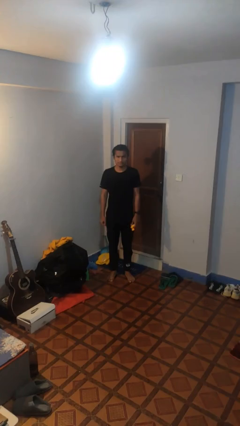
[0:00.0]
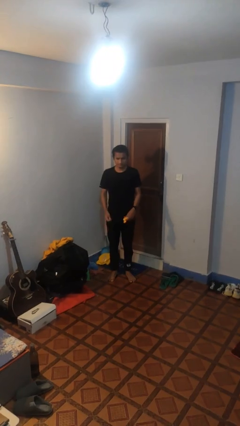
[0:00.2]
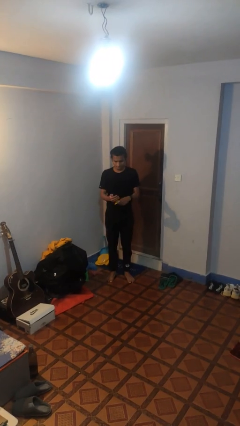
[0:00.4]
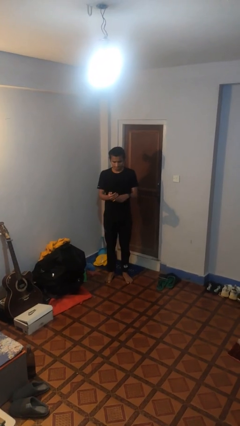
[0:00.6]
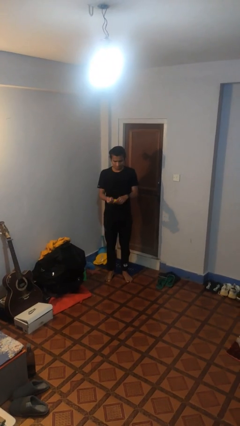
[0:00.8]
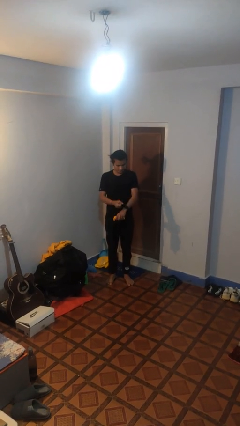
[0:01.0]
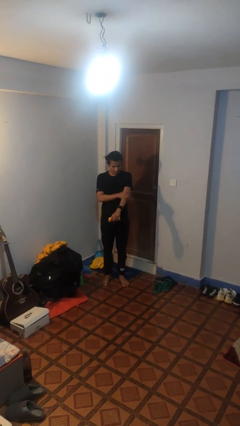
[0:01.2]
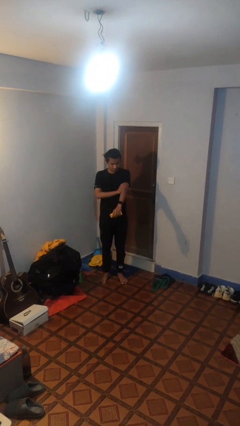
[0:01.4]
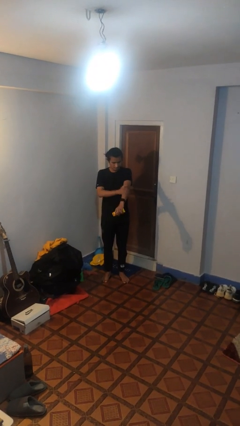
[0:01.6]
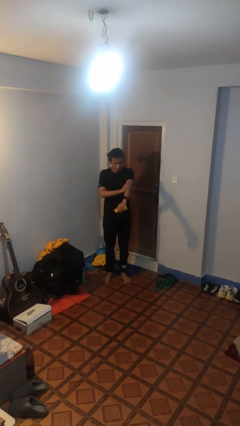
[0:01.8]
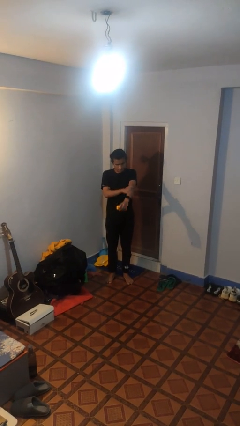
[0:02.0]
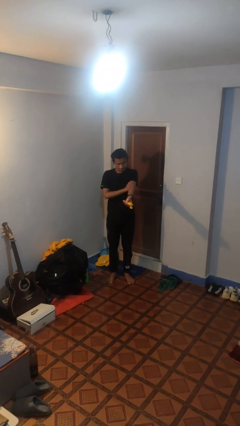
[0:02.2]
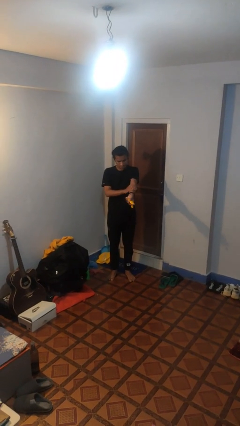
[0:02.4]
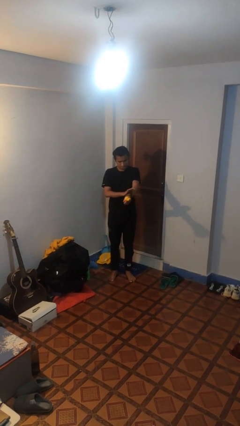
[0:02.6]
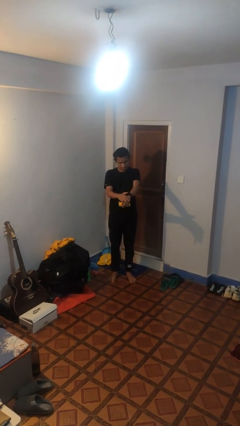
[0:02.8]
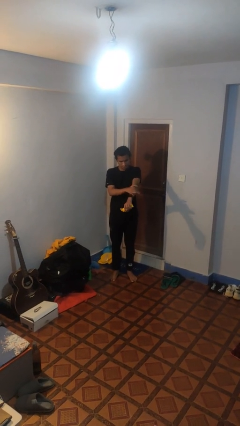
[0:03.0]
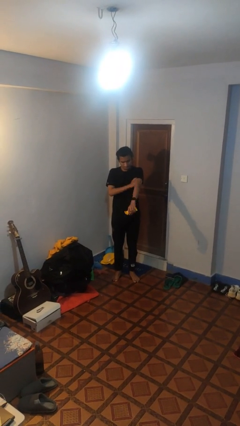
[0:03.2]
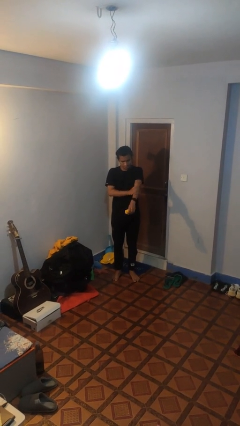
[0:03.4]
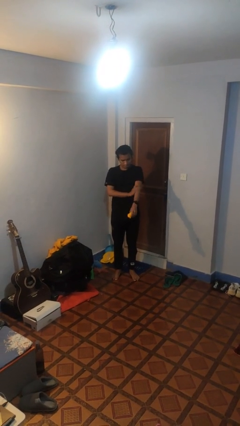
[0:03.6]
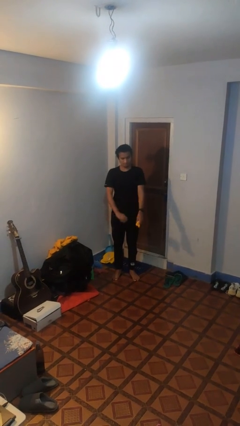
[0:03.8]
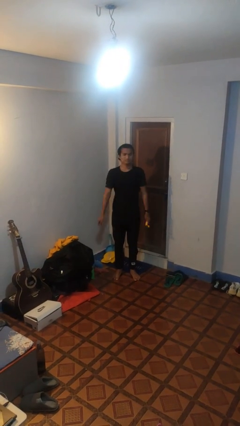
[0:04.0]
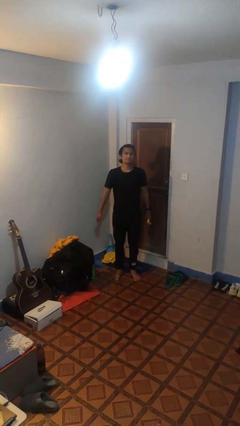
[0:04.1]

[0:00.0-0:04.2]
person applies sunscreen

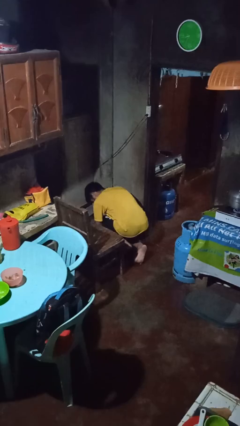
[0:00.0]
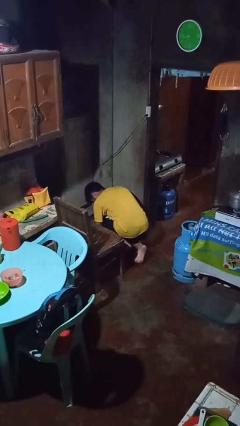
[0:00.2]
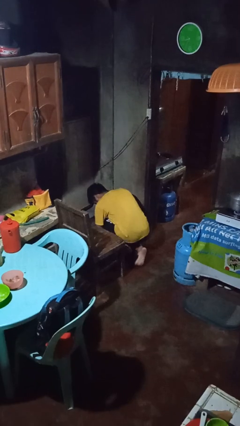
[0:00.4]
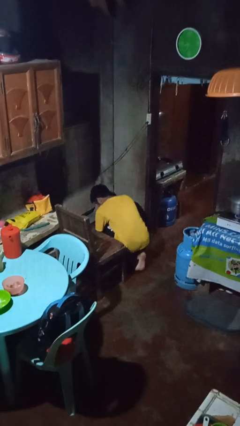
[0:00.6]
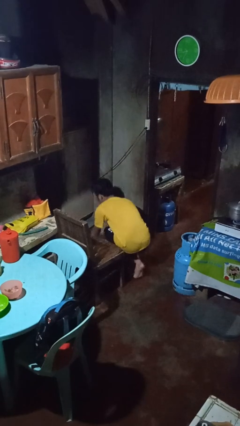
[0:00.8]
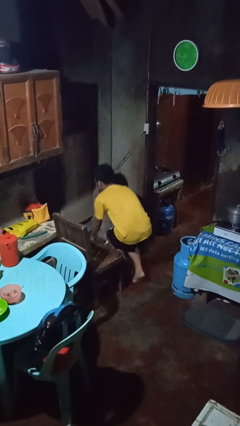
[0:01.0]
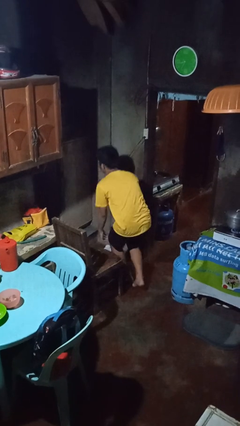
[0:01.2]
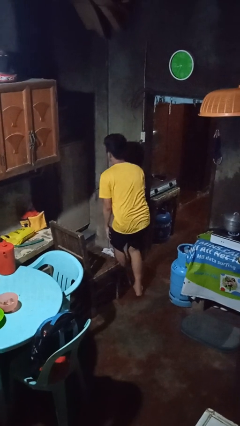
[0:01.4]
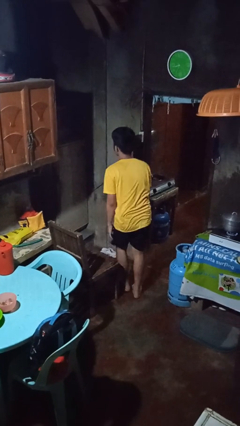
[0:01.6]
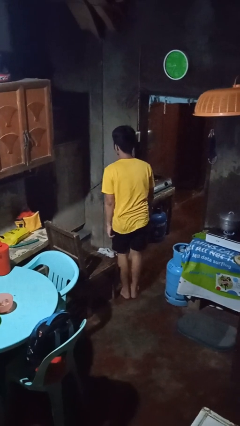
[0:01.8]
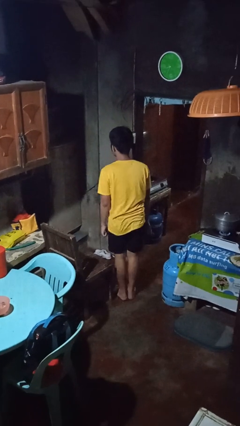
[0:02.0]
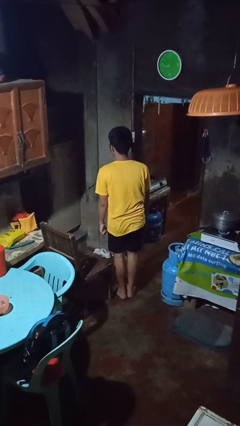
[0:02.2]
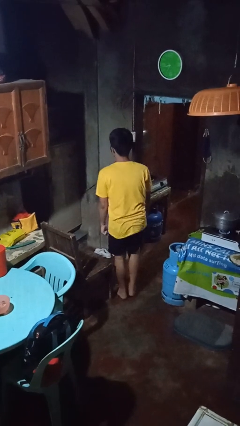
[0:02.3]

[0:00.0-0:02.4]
person stands up from floor

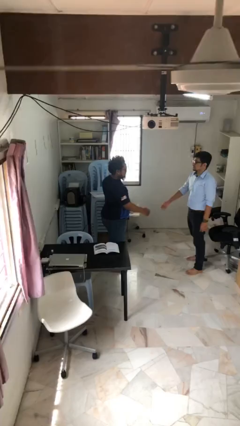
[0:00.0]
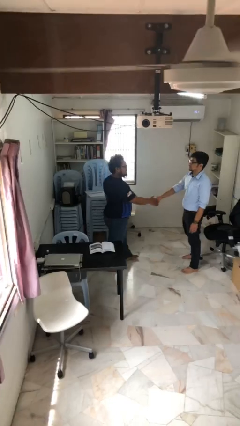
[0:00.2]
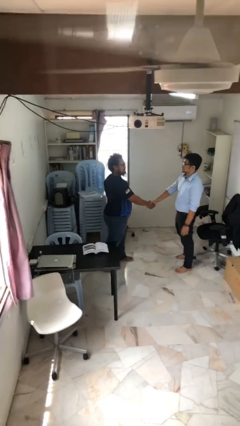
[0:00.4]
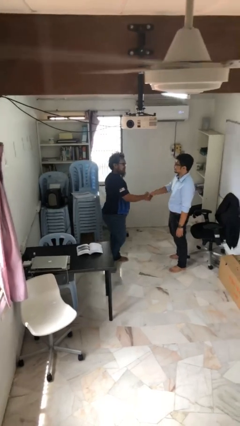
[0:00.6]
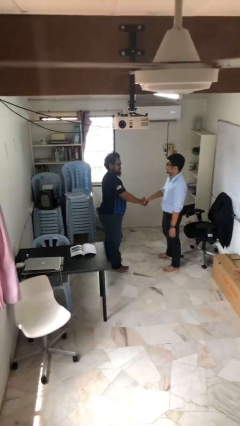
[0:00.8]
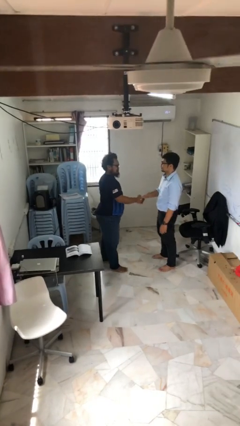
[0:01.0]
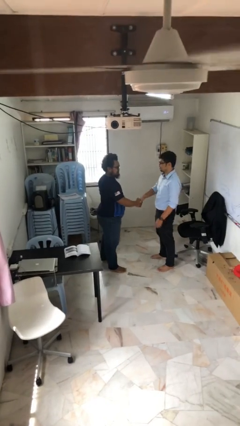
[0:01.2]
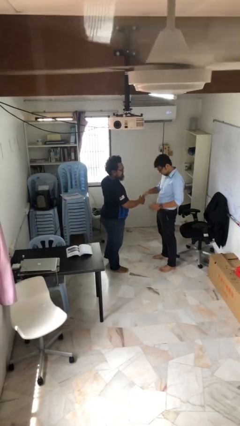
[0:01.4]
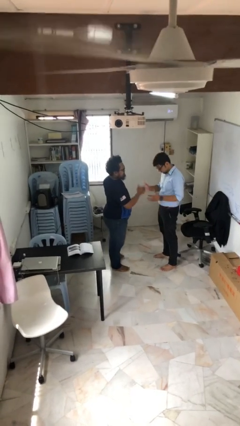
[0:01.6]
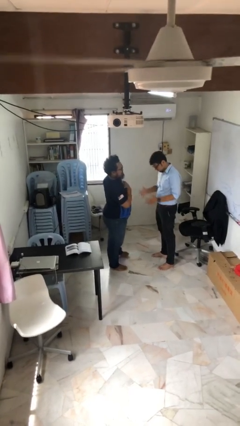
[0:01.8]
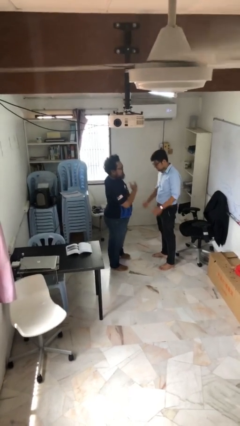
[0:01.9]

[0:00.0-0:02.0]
person shakes hand

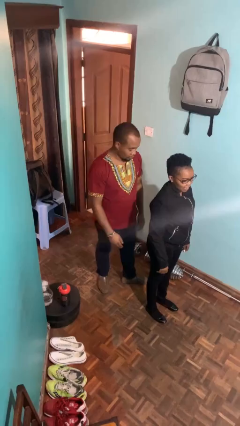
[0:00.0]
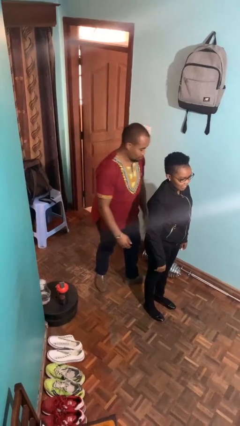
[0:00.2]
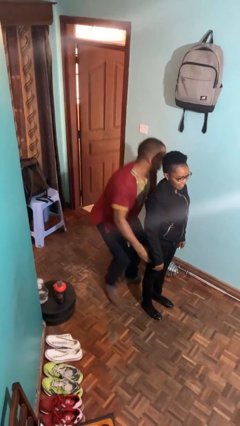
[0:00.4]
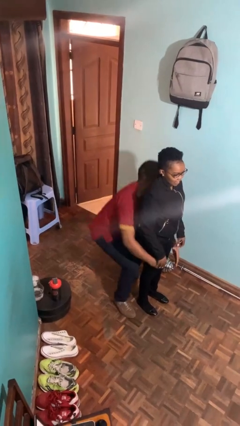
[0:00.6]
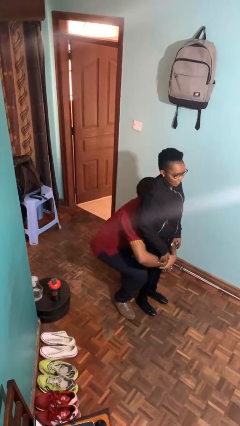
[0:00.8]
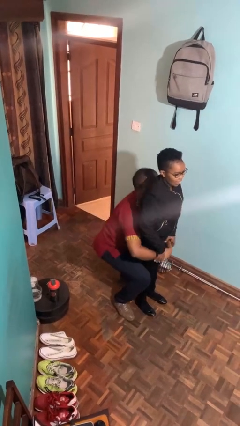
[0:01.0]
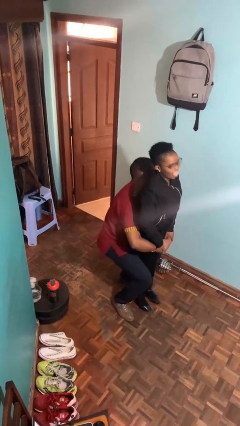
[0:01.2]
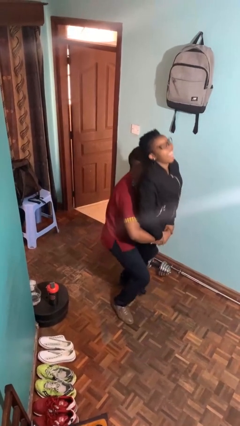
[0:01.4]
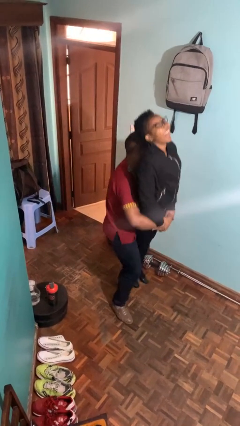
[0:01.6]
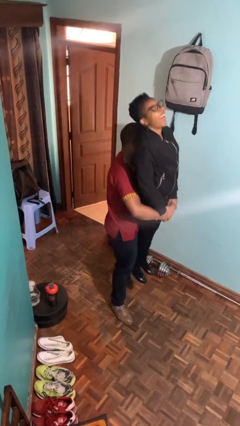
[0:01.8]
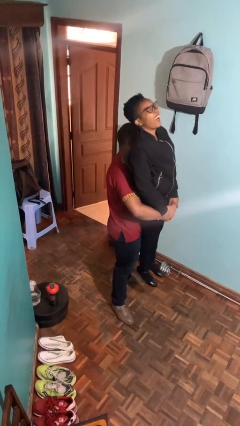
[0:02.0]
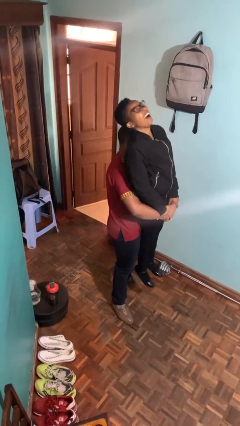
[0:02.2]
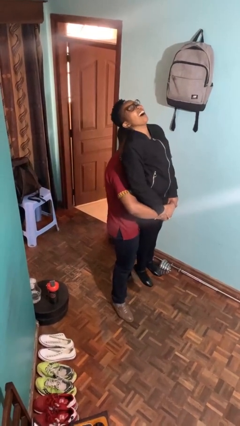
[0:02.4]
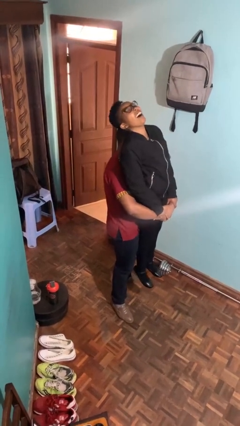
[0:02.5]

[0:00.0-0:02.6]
person picks up person

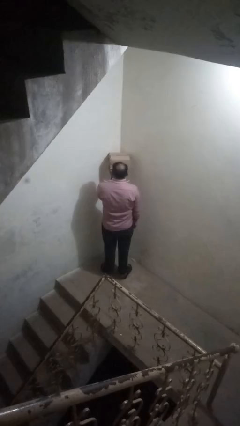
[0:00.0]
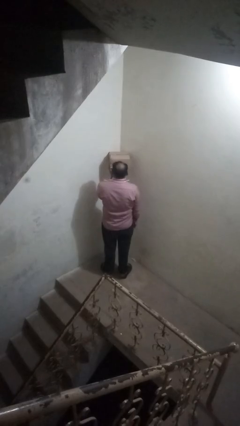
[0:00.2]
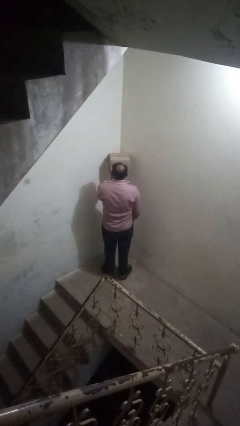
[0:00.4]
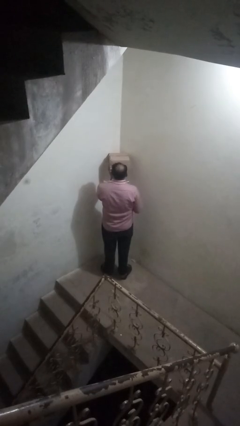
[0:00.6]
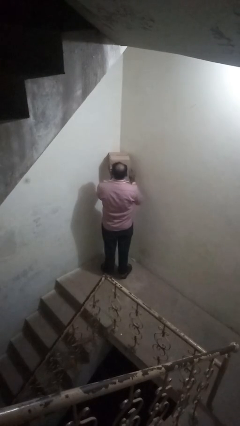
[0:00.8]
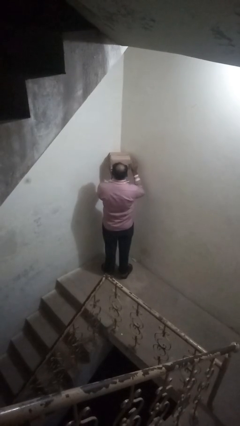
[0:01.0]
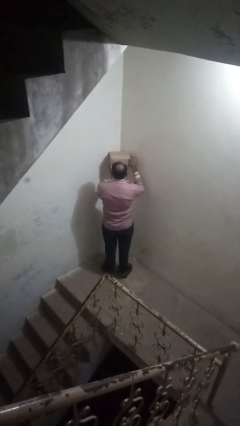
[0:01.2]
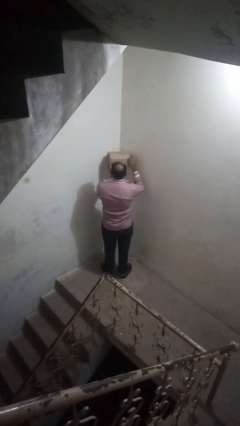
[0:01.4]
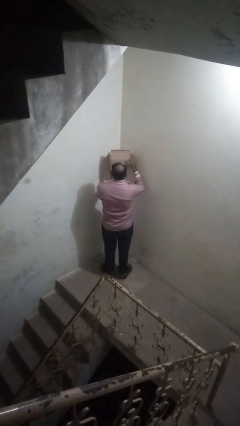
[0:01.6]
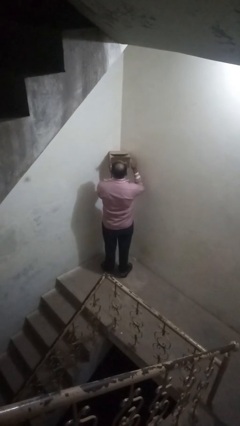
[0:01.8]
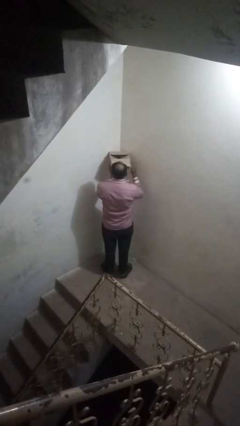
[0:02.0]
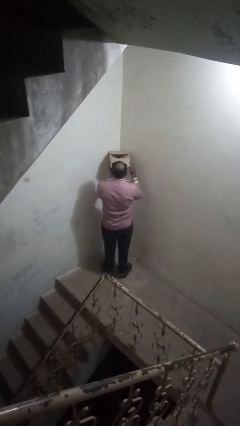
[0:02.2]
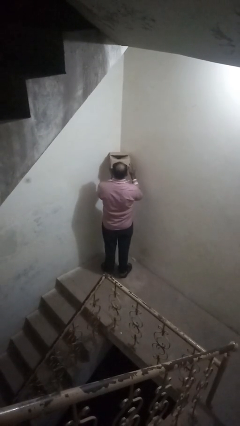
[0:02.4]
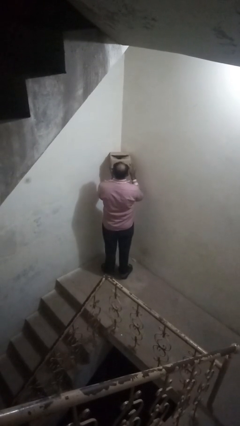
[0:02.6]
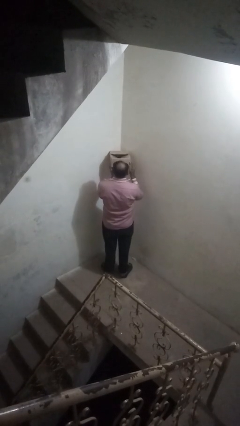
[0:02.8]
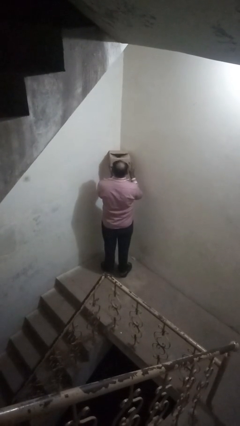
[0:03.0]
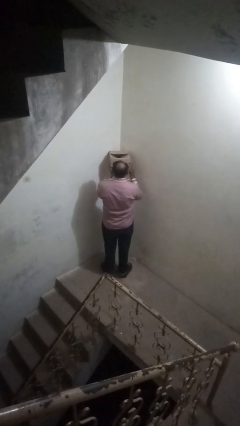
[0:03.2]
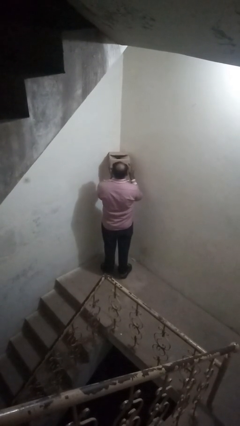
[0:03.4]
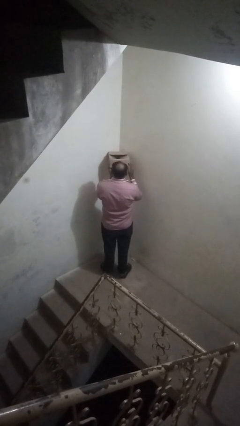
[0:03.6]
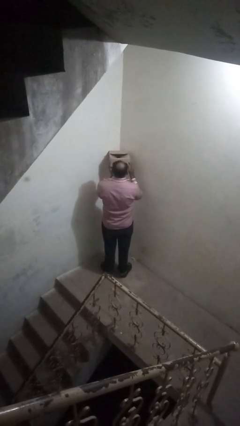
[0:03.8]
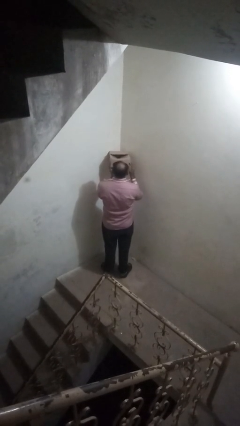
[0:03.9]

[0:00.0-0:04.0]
person opens mailbox

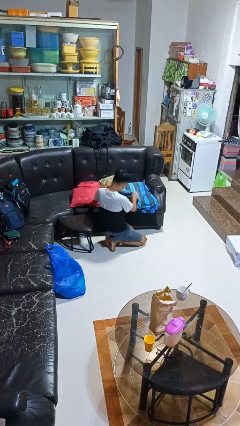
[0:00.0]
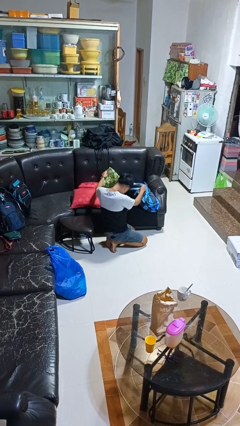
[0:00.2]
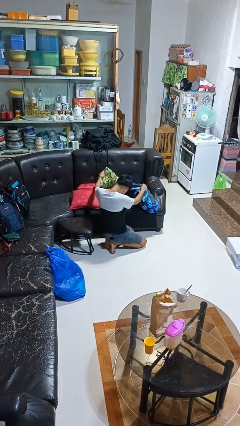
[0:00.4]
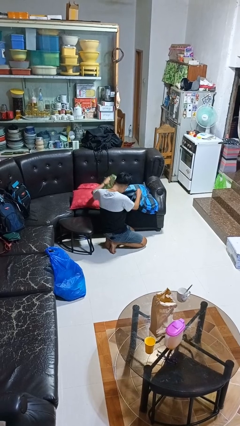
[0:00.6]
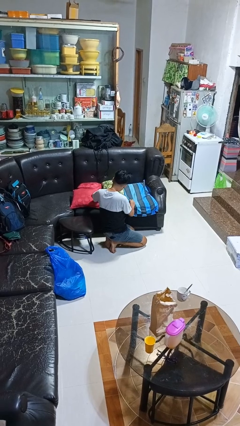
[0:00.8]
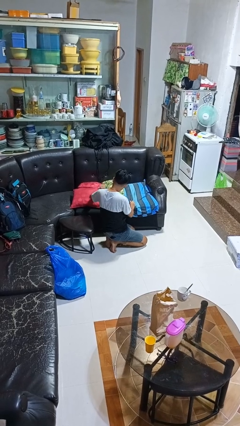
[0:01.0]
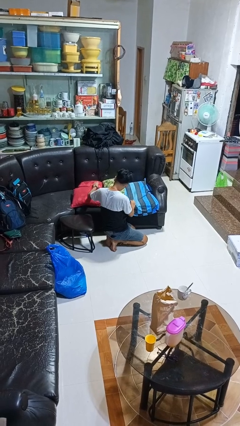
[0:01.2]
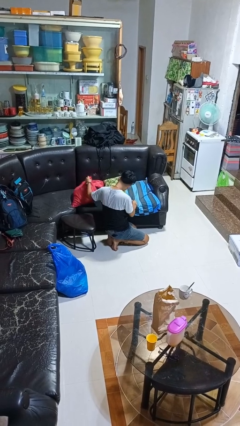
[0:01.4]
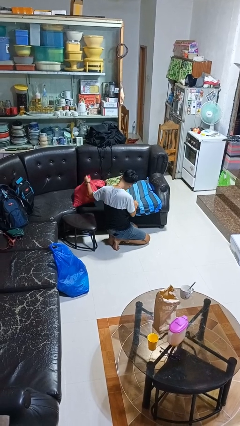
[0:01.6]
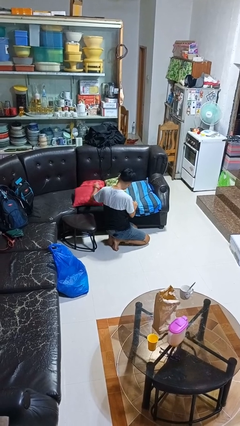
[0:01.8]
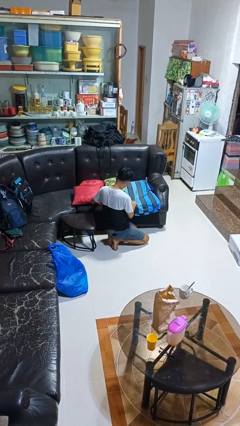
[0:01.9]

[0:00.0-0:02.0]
person searches in couch

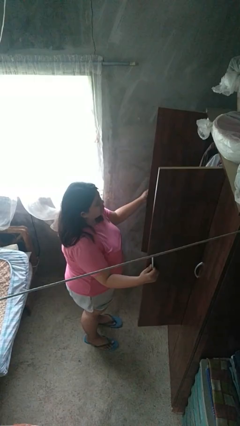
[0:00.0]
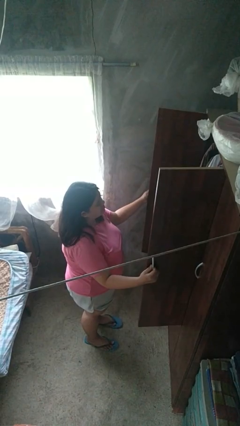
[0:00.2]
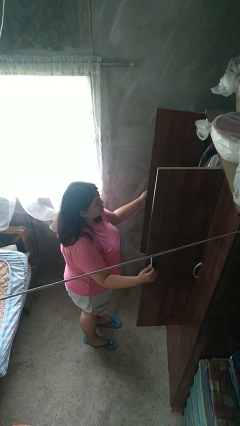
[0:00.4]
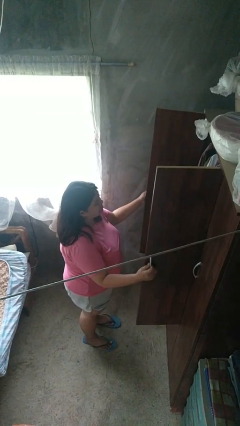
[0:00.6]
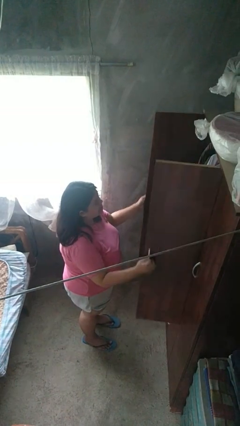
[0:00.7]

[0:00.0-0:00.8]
person closes closet door
